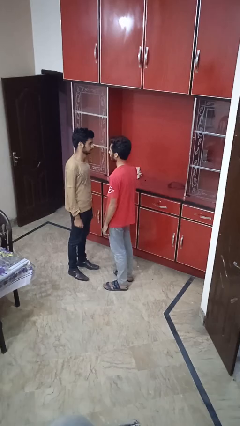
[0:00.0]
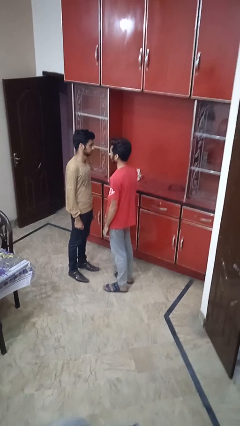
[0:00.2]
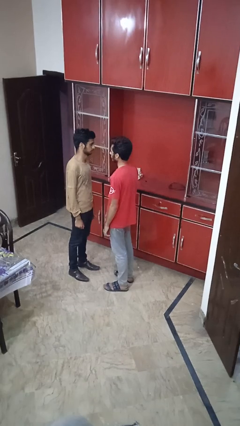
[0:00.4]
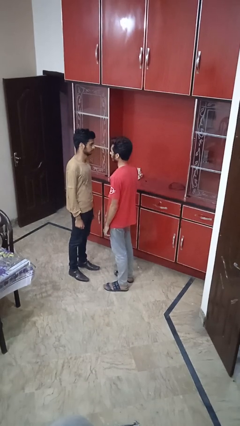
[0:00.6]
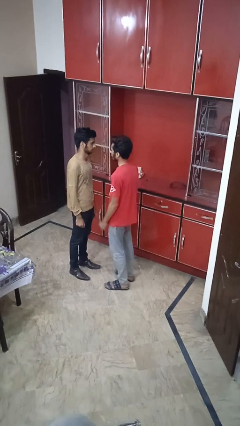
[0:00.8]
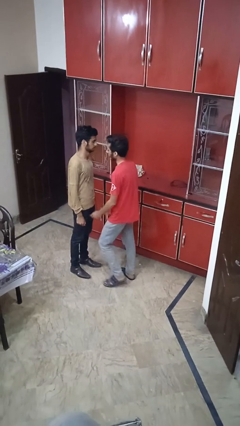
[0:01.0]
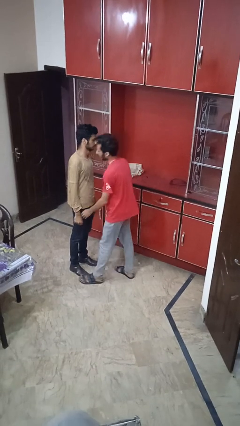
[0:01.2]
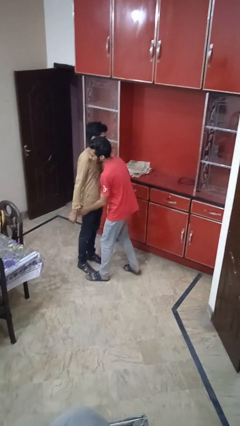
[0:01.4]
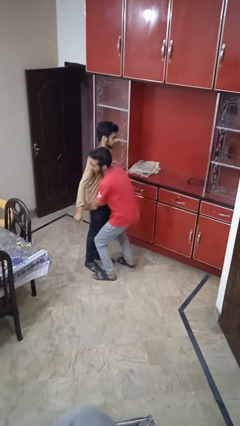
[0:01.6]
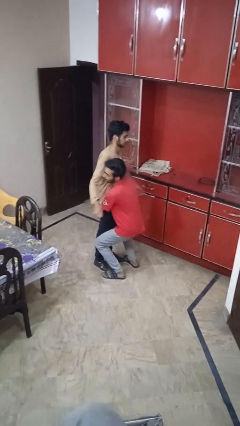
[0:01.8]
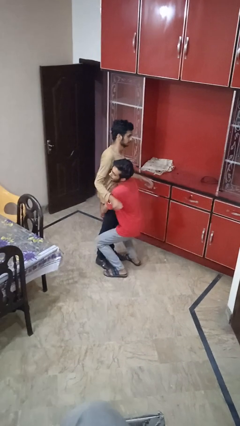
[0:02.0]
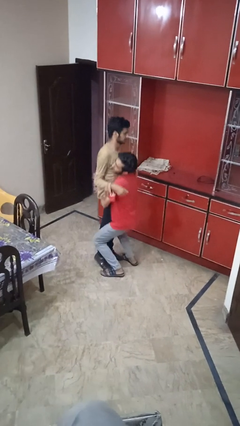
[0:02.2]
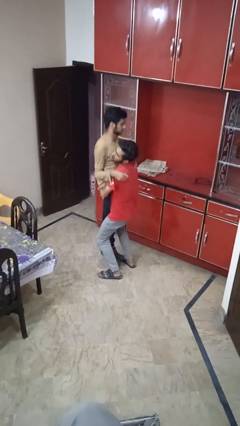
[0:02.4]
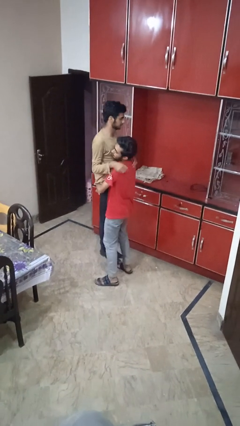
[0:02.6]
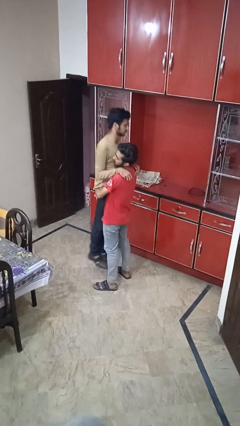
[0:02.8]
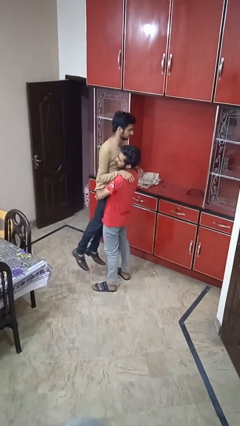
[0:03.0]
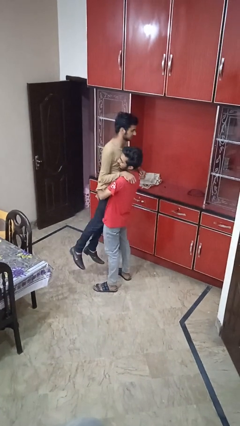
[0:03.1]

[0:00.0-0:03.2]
person picks up person

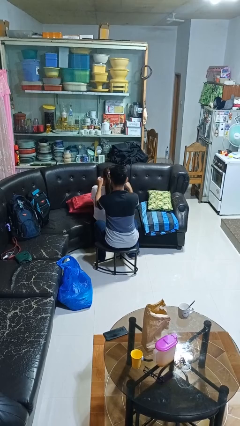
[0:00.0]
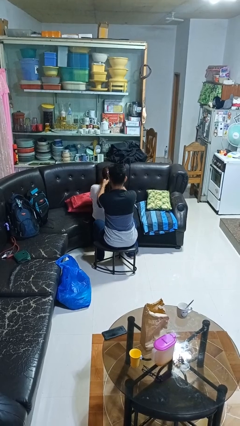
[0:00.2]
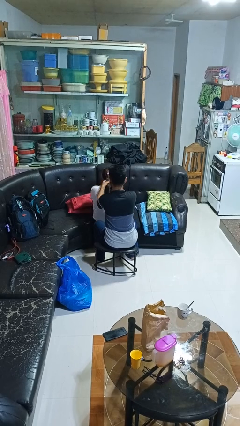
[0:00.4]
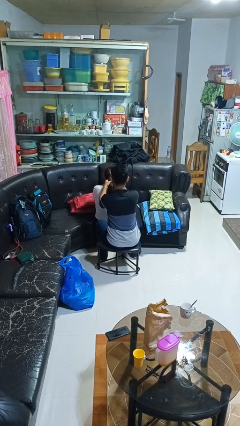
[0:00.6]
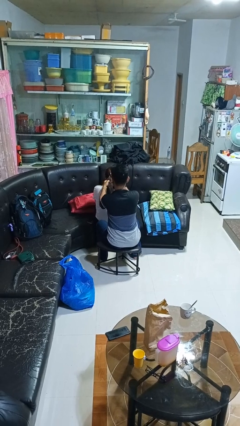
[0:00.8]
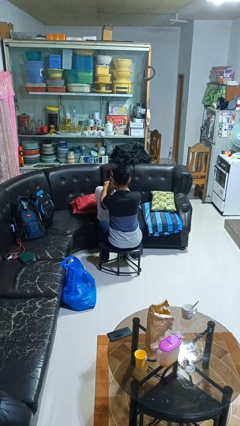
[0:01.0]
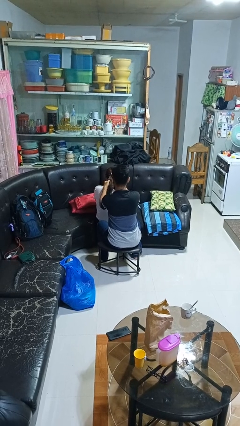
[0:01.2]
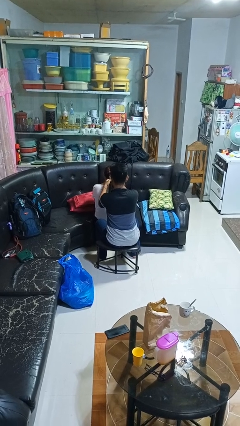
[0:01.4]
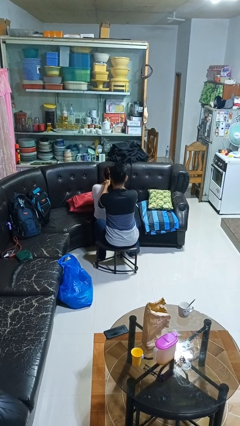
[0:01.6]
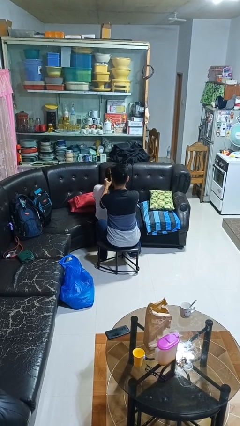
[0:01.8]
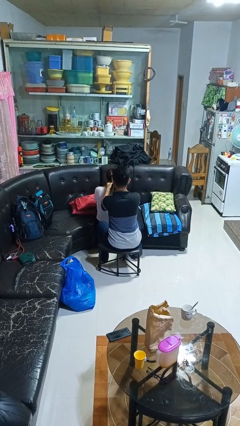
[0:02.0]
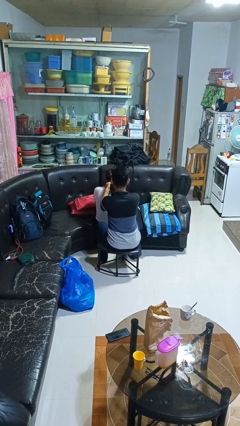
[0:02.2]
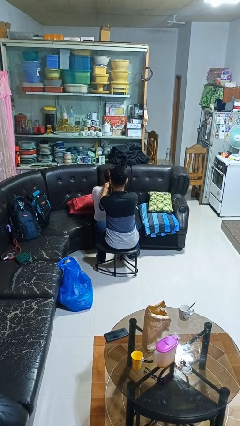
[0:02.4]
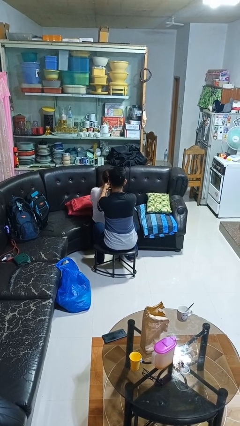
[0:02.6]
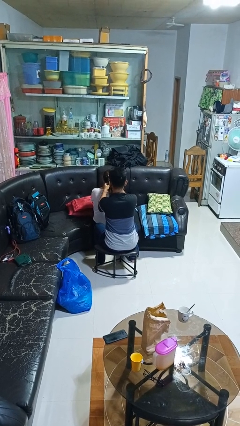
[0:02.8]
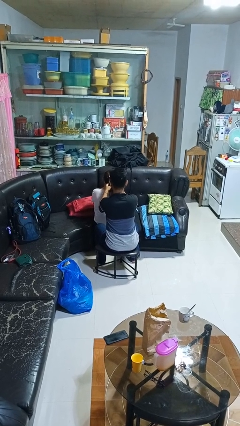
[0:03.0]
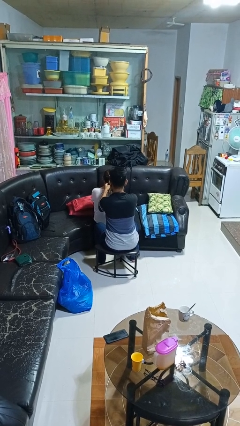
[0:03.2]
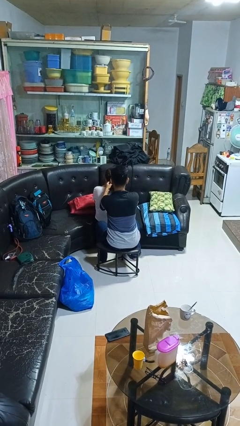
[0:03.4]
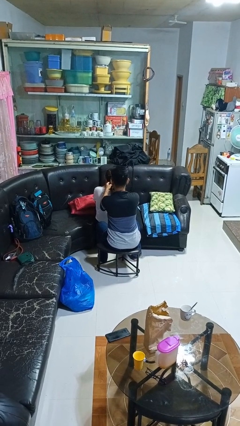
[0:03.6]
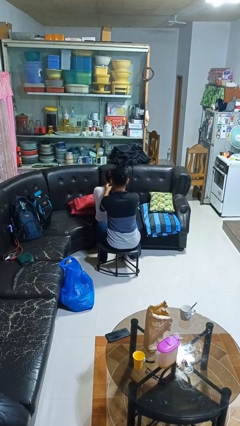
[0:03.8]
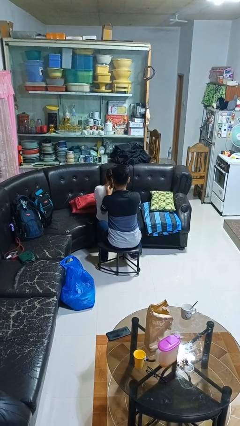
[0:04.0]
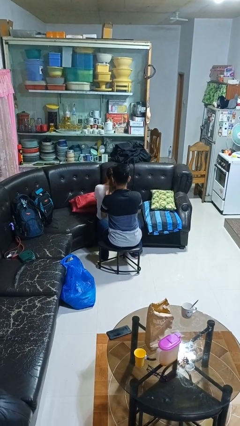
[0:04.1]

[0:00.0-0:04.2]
person braids hair of person

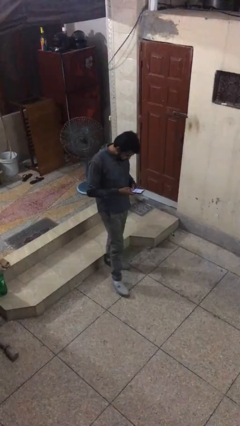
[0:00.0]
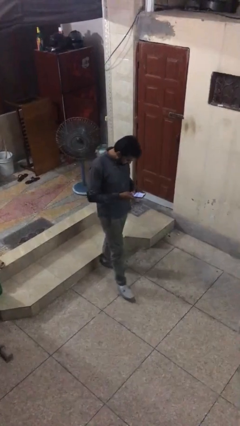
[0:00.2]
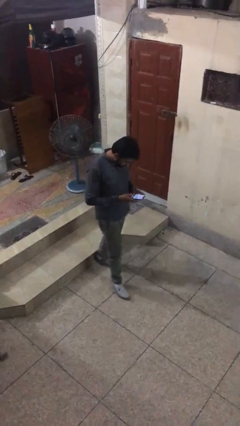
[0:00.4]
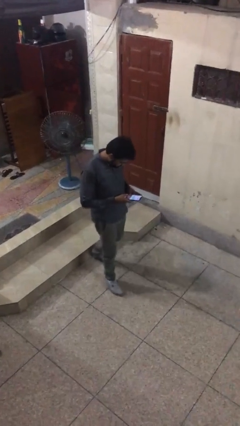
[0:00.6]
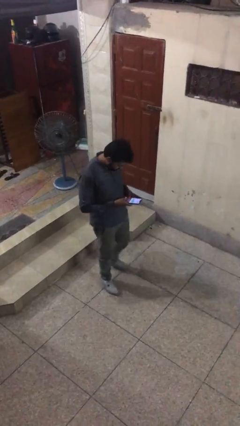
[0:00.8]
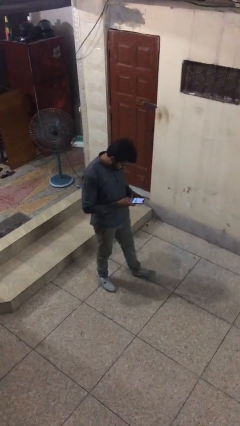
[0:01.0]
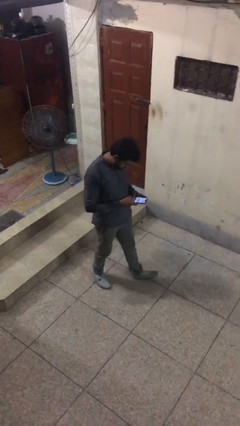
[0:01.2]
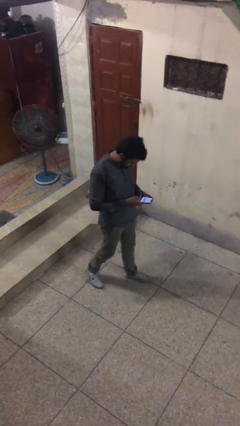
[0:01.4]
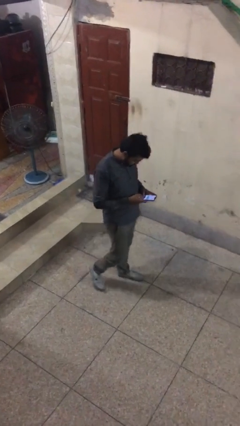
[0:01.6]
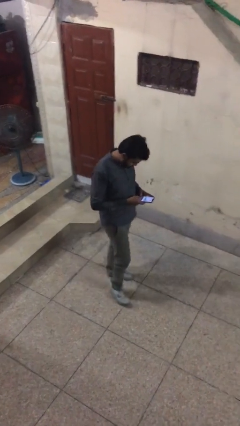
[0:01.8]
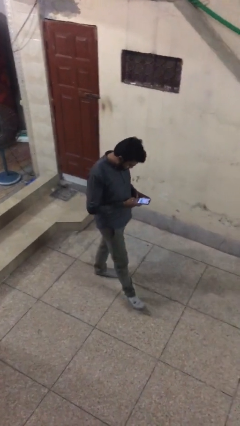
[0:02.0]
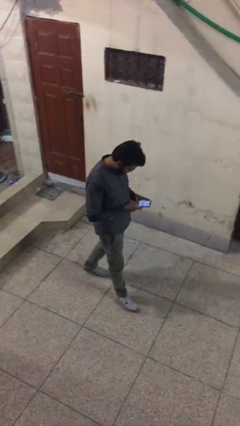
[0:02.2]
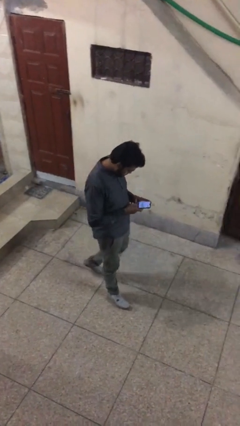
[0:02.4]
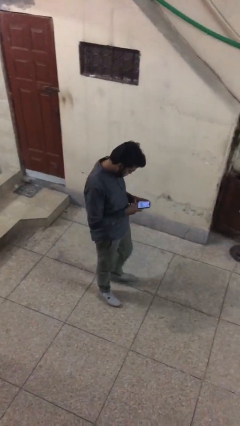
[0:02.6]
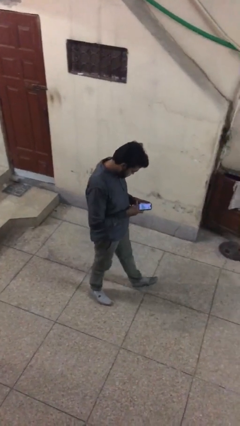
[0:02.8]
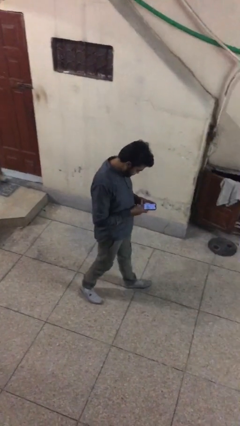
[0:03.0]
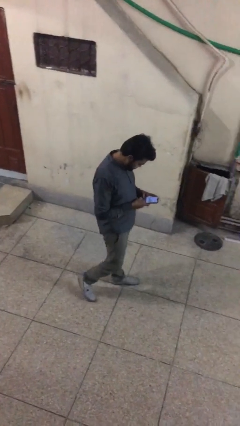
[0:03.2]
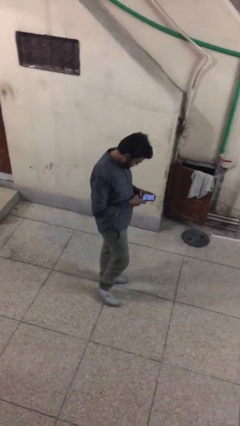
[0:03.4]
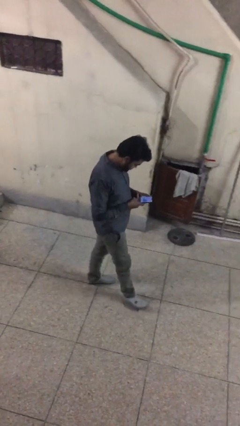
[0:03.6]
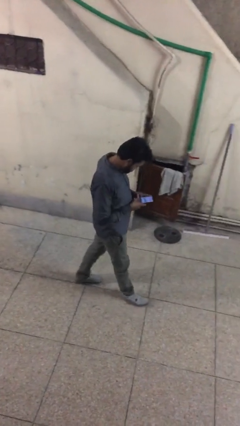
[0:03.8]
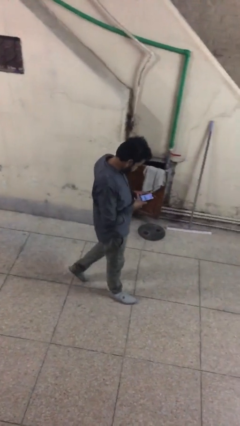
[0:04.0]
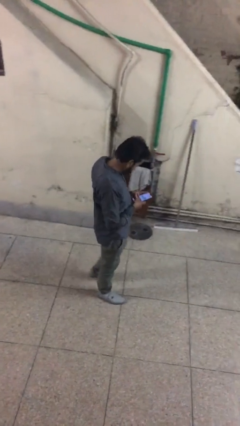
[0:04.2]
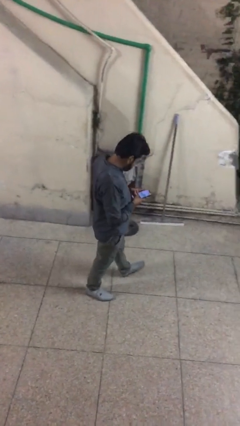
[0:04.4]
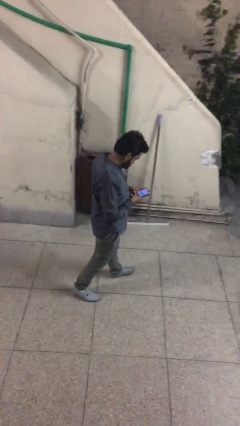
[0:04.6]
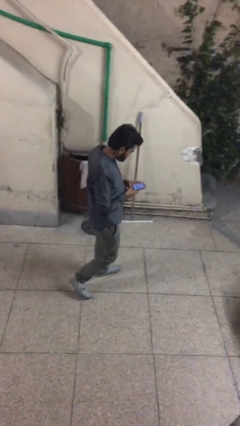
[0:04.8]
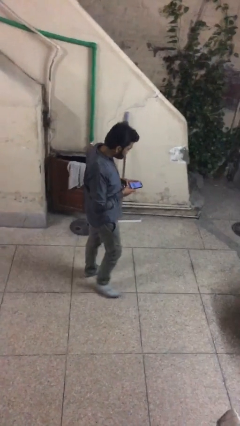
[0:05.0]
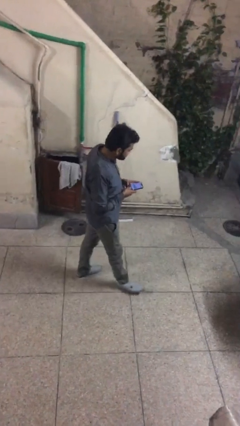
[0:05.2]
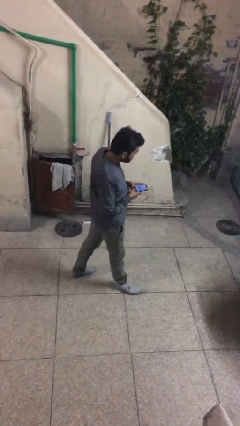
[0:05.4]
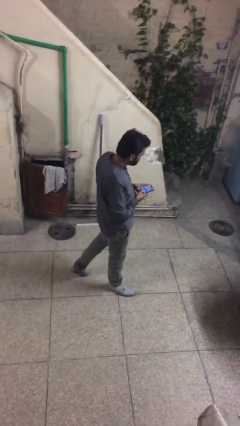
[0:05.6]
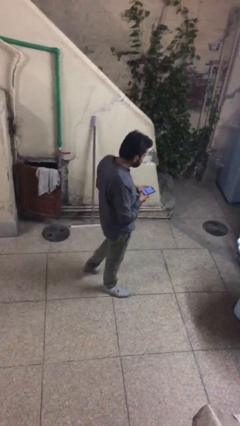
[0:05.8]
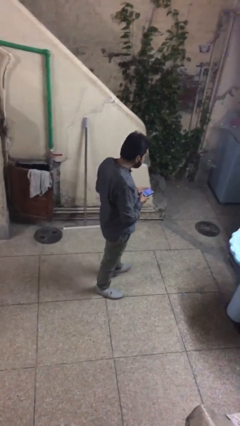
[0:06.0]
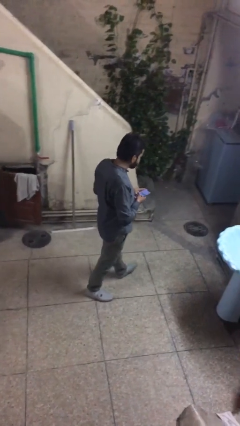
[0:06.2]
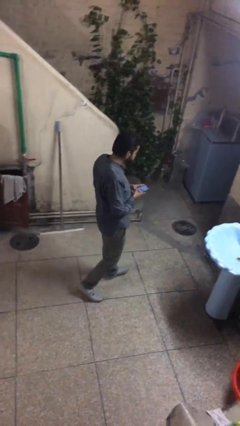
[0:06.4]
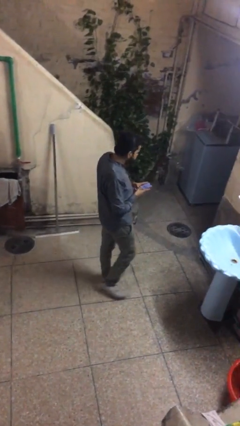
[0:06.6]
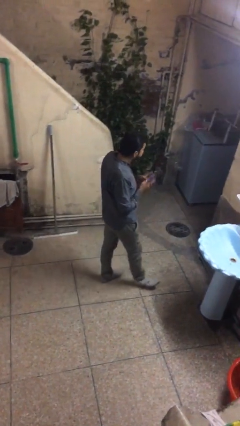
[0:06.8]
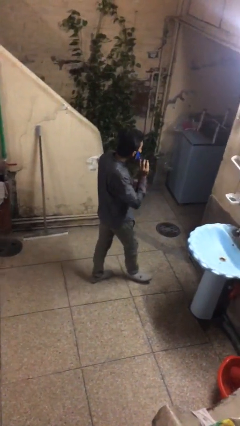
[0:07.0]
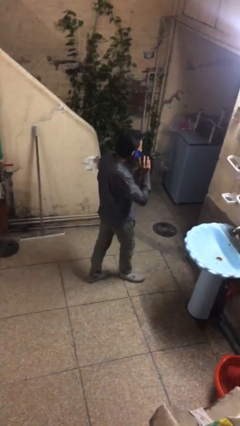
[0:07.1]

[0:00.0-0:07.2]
person texts on phone

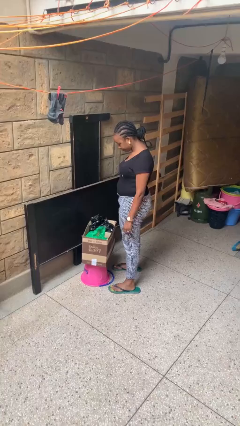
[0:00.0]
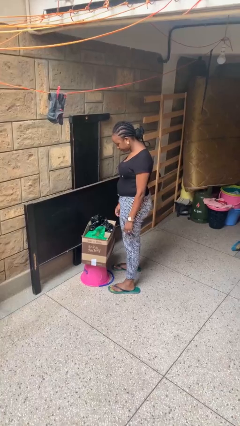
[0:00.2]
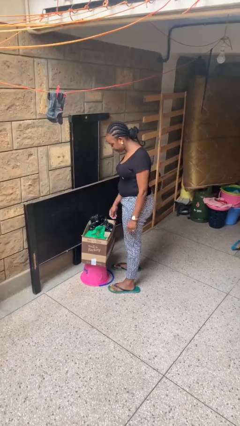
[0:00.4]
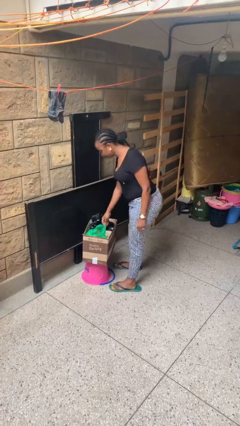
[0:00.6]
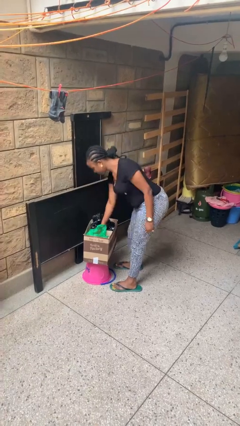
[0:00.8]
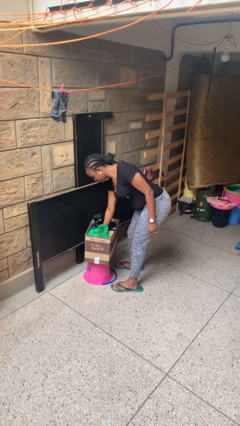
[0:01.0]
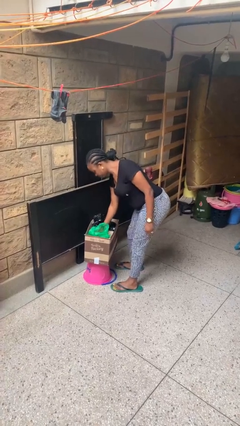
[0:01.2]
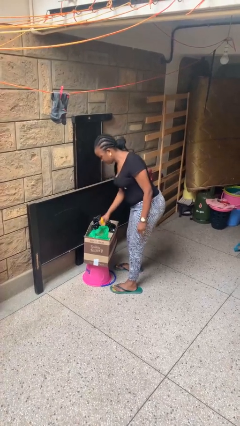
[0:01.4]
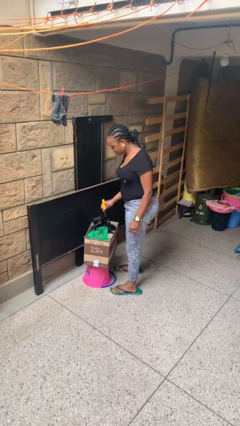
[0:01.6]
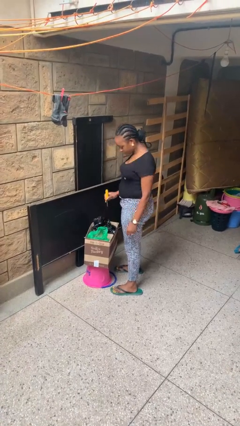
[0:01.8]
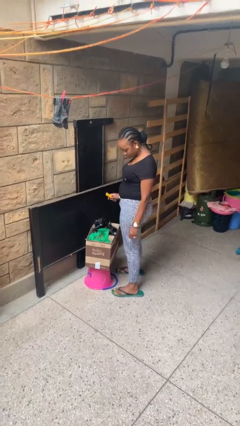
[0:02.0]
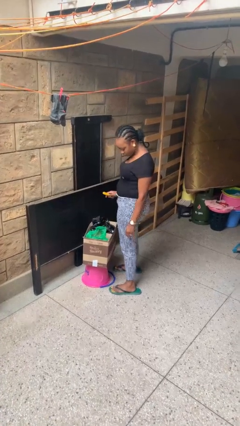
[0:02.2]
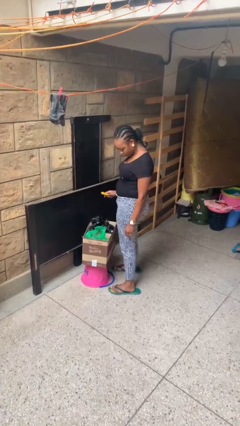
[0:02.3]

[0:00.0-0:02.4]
person takes object from box

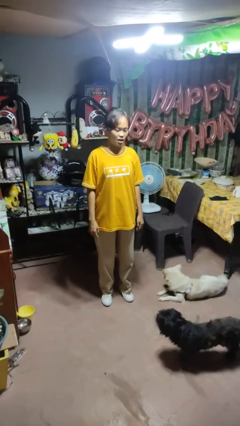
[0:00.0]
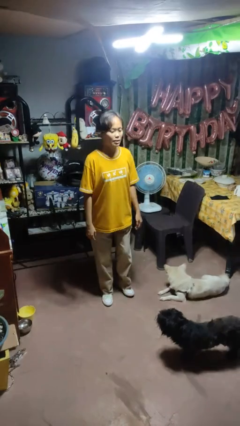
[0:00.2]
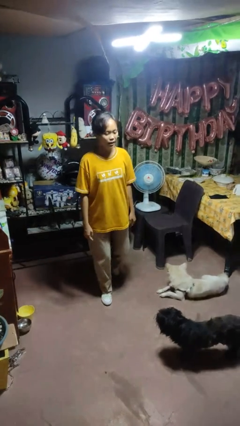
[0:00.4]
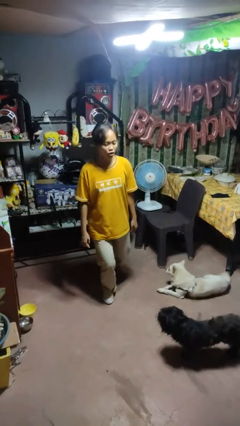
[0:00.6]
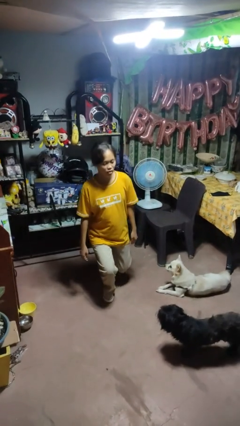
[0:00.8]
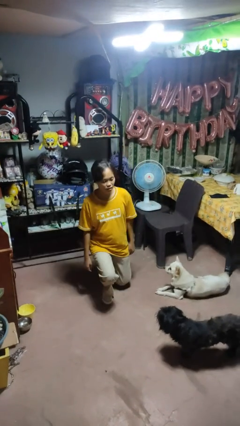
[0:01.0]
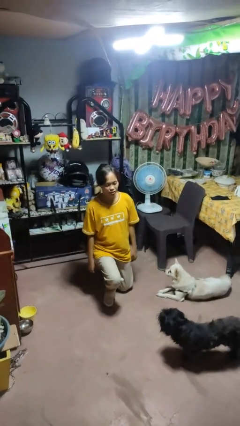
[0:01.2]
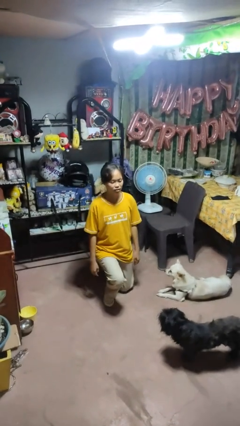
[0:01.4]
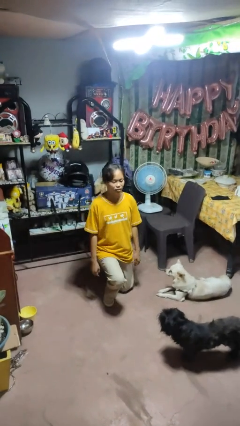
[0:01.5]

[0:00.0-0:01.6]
person kneels
